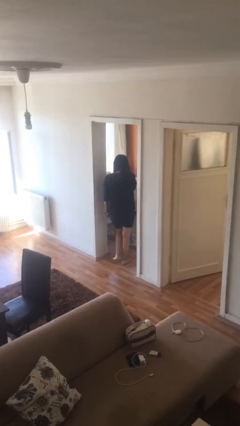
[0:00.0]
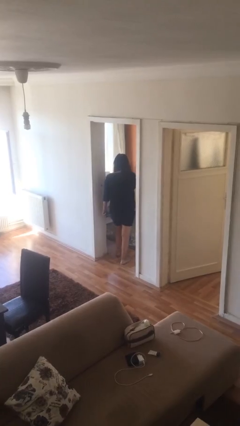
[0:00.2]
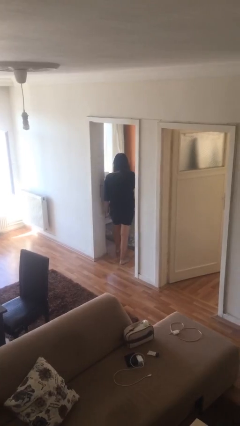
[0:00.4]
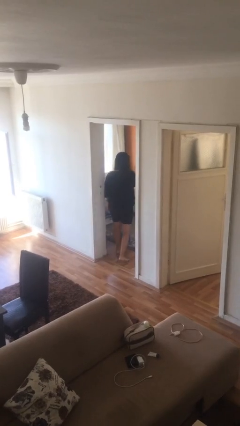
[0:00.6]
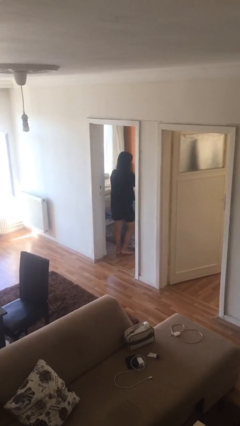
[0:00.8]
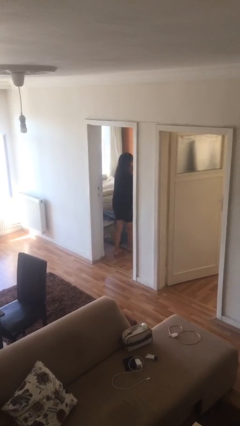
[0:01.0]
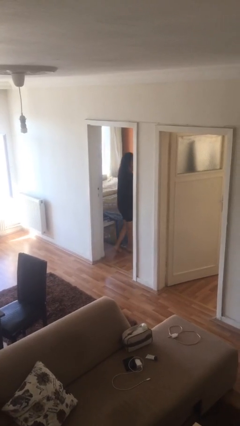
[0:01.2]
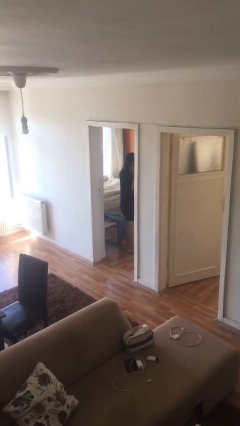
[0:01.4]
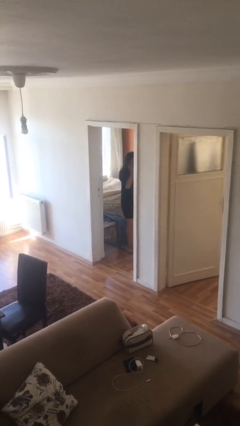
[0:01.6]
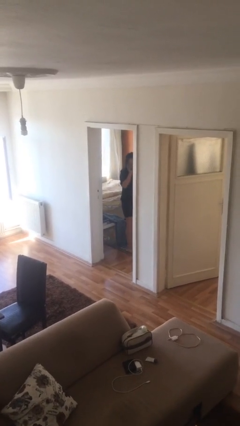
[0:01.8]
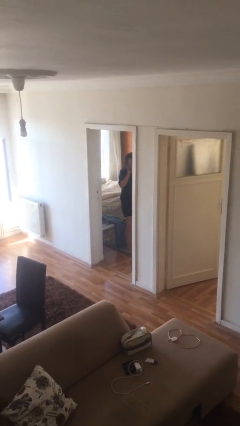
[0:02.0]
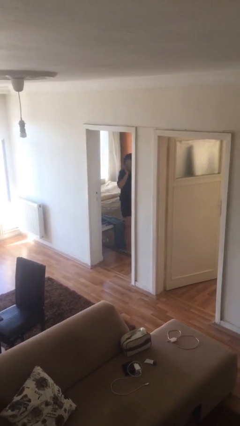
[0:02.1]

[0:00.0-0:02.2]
person exits scene through structure

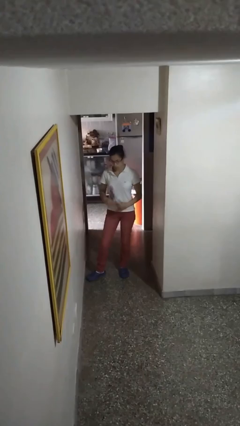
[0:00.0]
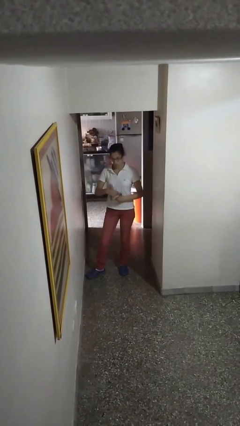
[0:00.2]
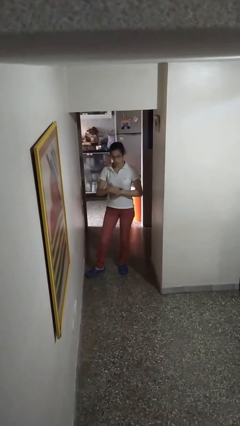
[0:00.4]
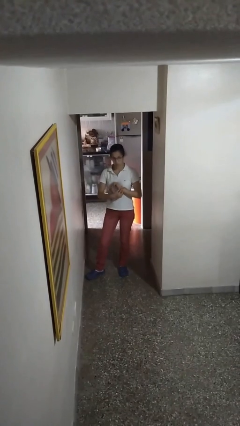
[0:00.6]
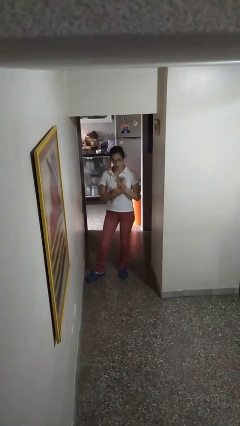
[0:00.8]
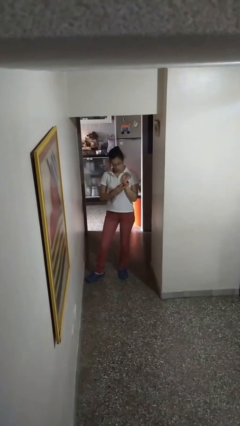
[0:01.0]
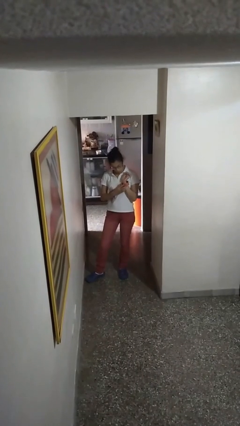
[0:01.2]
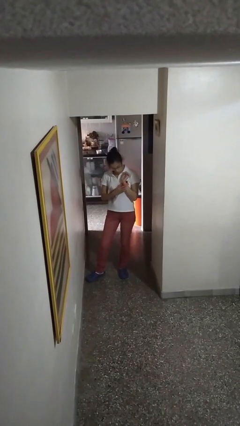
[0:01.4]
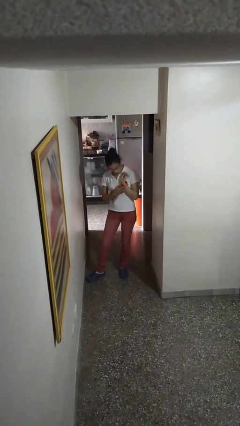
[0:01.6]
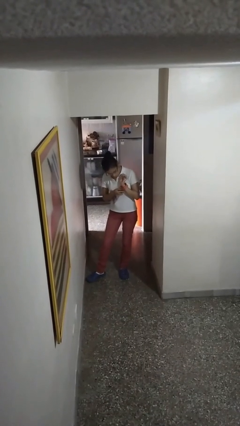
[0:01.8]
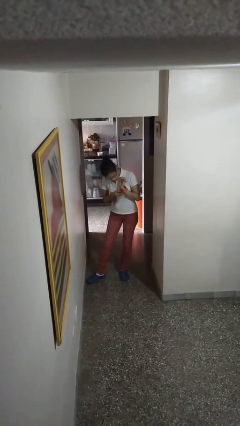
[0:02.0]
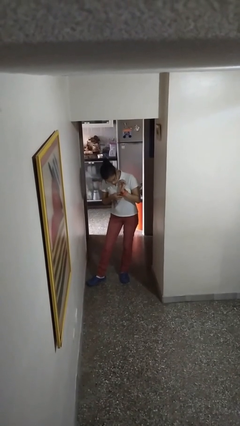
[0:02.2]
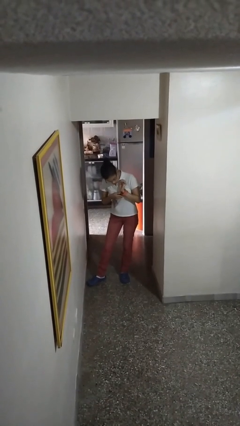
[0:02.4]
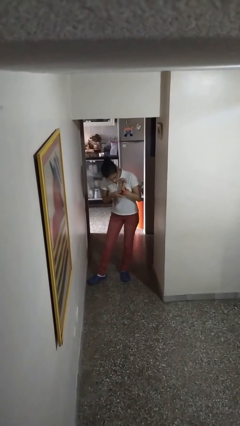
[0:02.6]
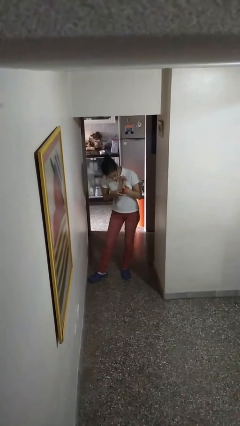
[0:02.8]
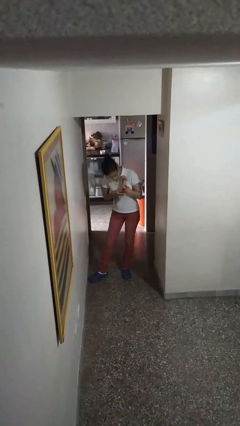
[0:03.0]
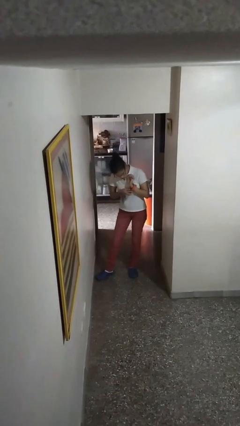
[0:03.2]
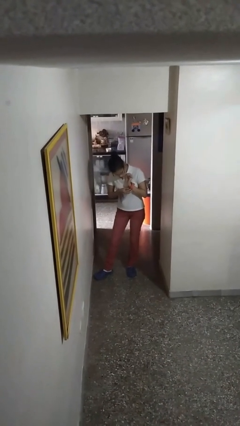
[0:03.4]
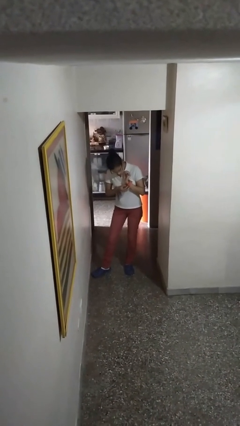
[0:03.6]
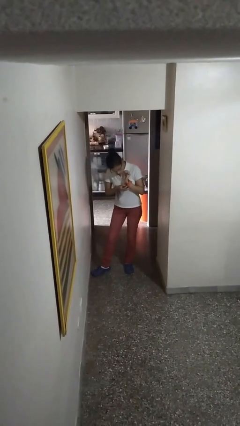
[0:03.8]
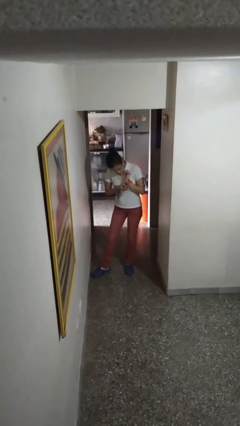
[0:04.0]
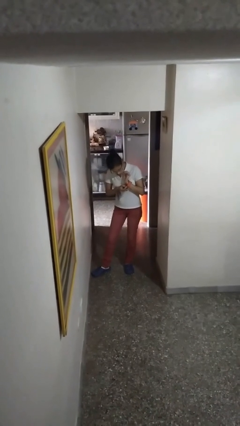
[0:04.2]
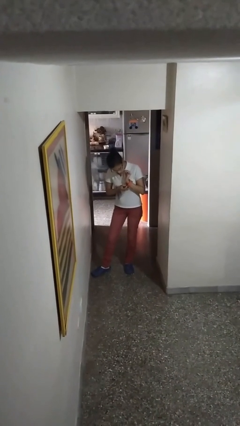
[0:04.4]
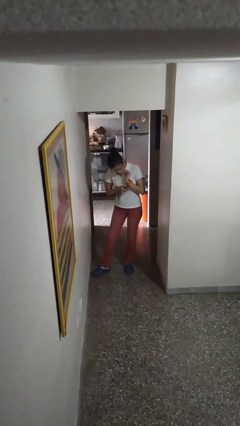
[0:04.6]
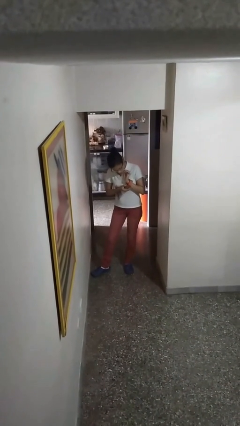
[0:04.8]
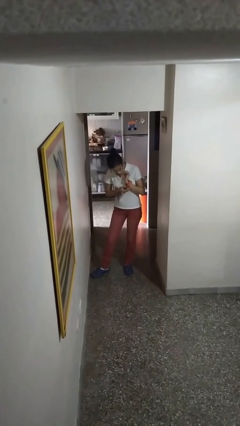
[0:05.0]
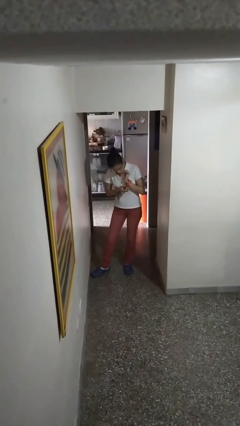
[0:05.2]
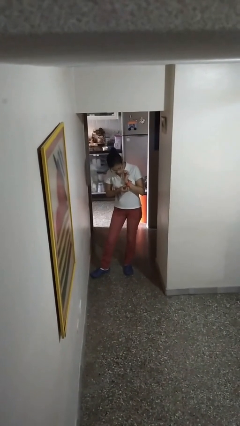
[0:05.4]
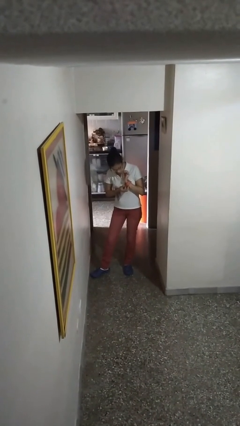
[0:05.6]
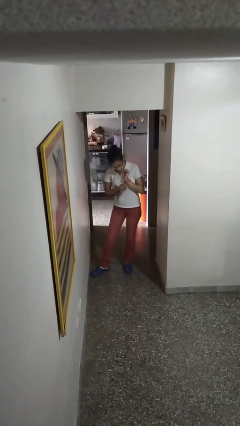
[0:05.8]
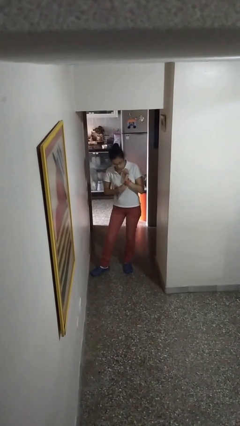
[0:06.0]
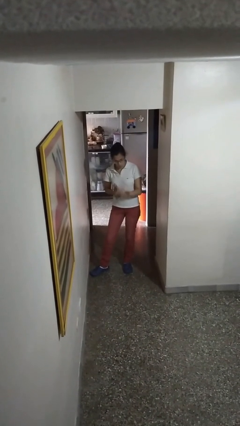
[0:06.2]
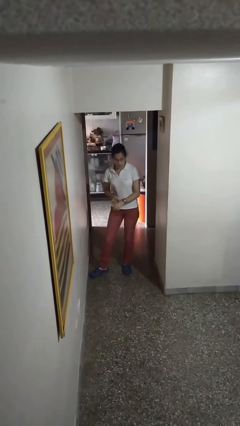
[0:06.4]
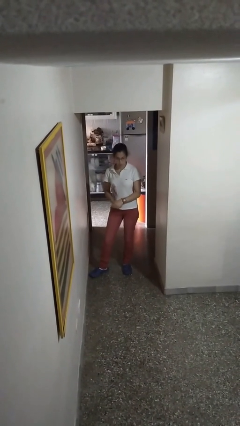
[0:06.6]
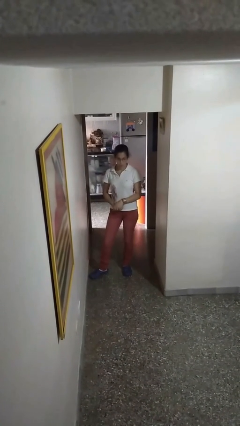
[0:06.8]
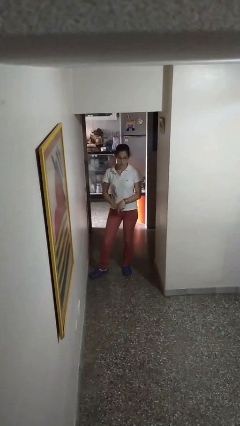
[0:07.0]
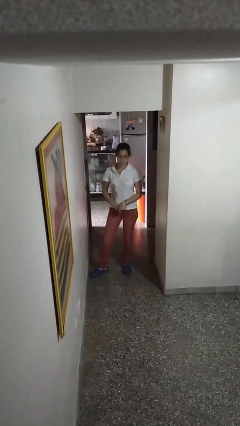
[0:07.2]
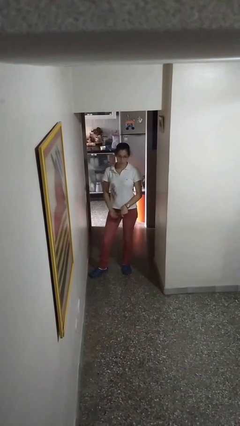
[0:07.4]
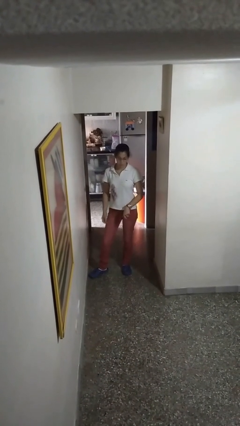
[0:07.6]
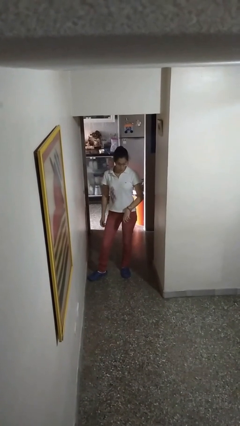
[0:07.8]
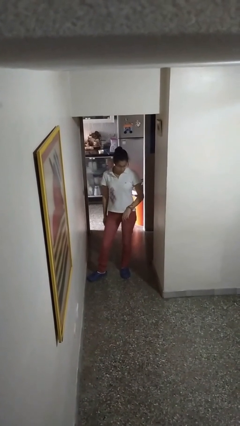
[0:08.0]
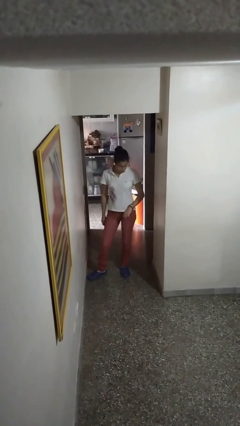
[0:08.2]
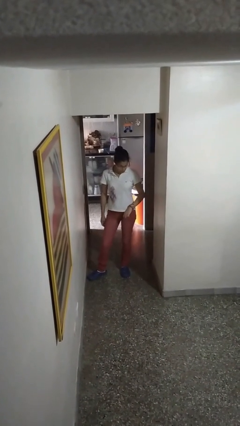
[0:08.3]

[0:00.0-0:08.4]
person puts on wristwatch

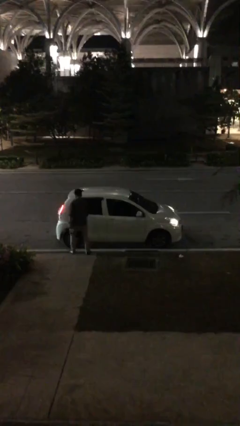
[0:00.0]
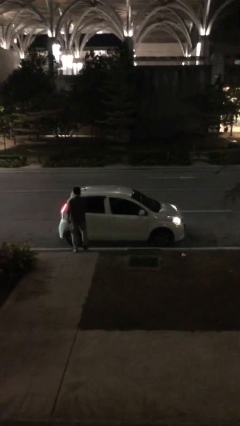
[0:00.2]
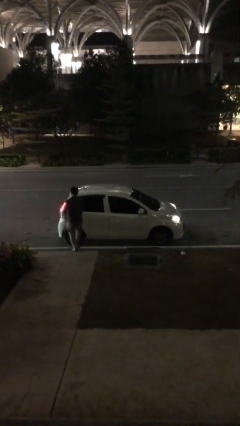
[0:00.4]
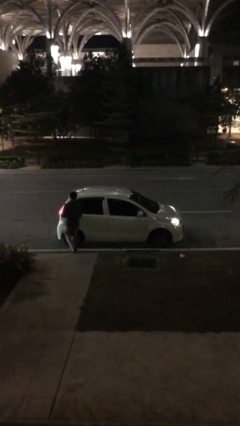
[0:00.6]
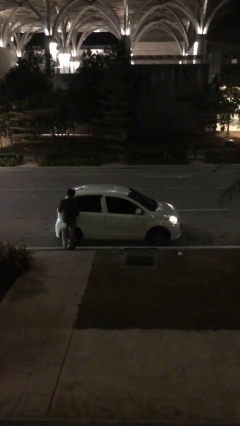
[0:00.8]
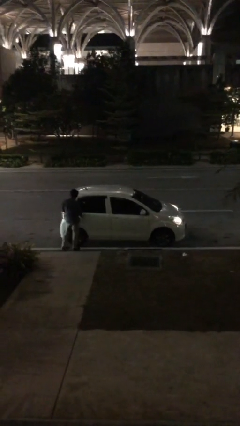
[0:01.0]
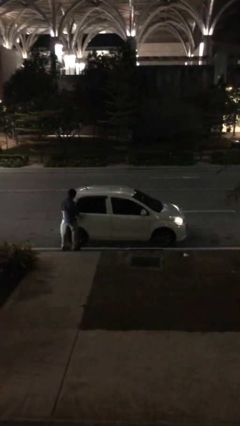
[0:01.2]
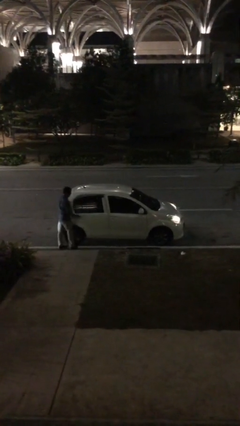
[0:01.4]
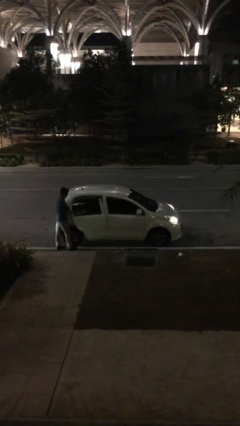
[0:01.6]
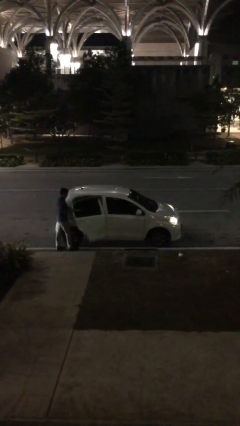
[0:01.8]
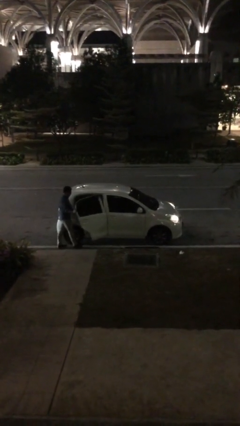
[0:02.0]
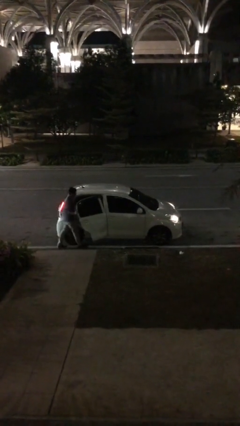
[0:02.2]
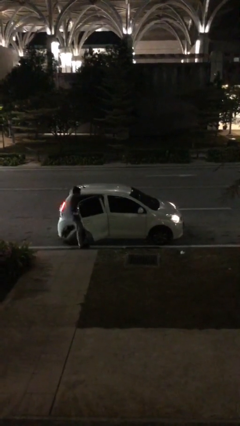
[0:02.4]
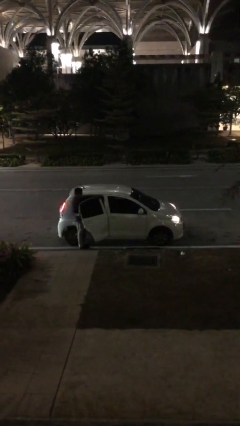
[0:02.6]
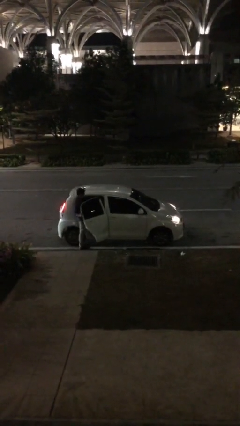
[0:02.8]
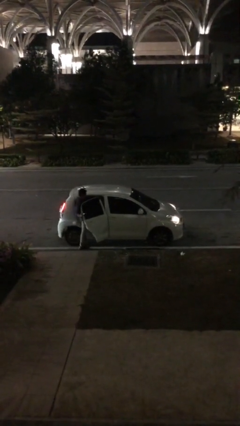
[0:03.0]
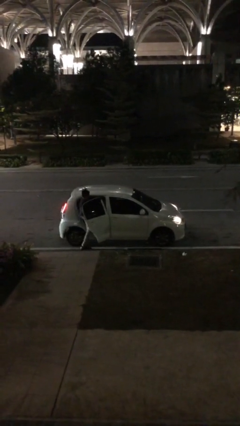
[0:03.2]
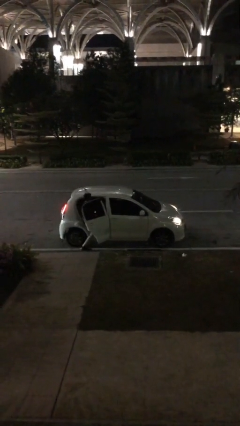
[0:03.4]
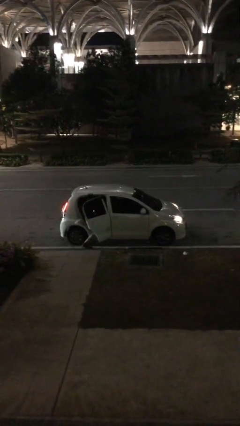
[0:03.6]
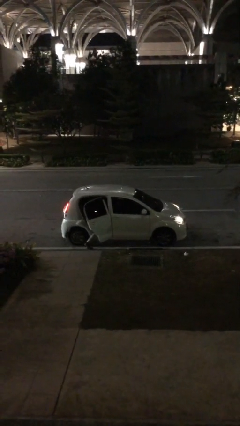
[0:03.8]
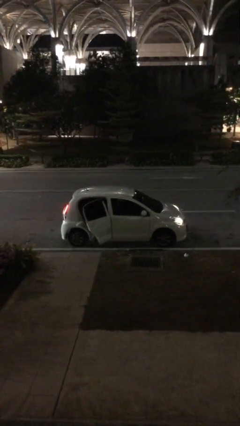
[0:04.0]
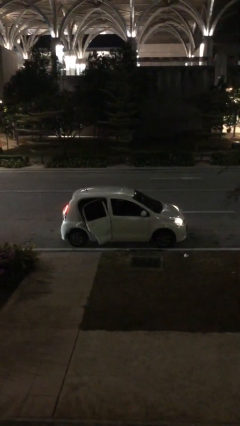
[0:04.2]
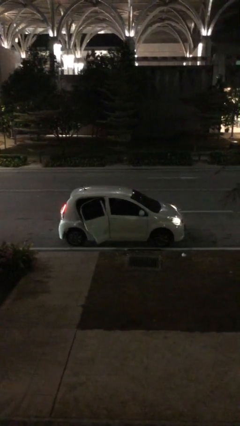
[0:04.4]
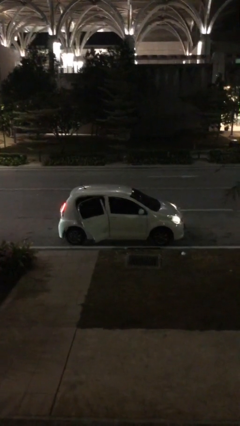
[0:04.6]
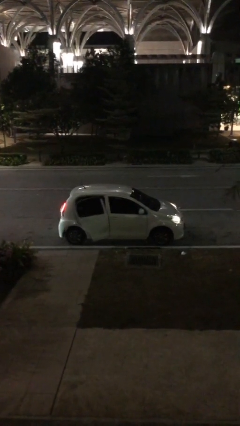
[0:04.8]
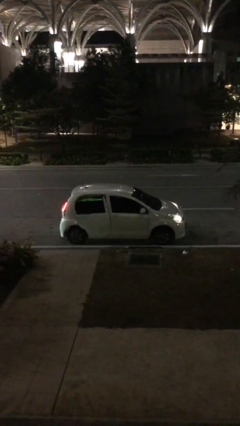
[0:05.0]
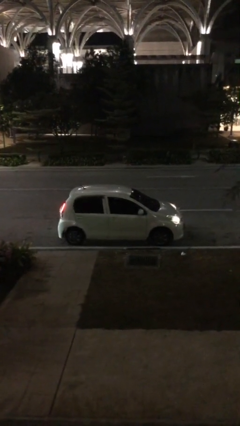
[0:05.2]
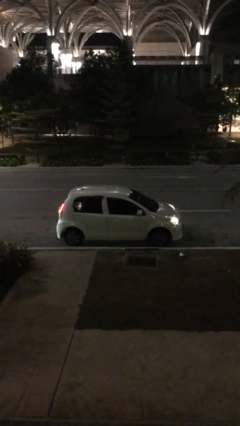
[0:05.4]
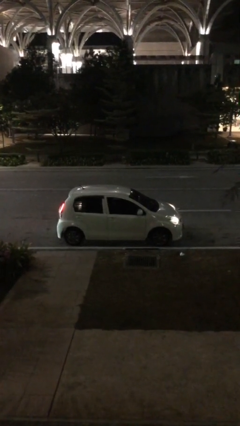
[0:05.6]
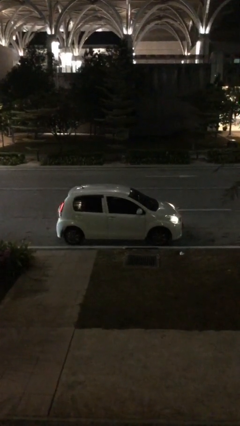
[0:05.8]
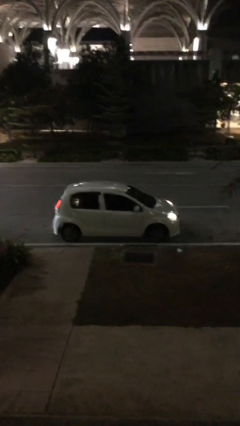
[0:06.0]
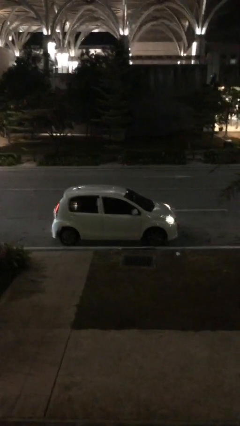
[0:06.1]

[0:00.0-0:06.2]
car picks up person

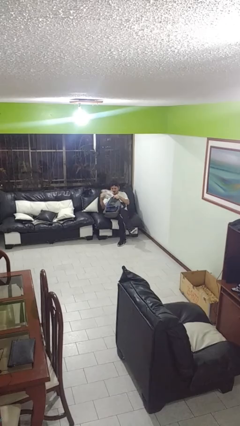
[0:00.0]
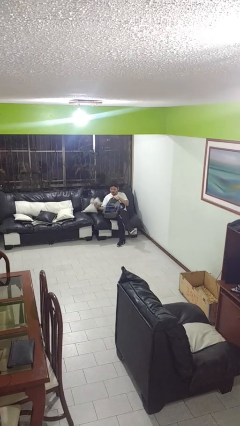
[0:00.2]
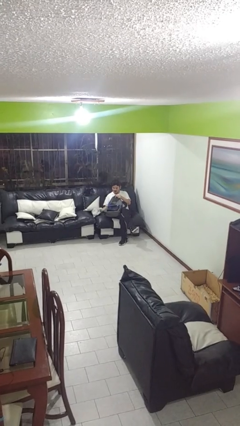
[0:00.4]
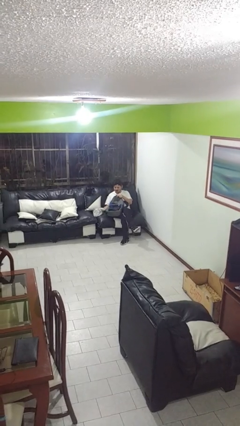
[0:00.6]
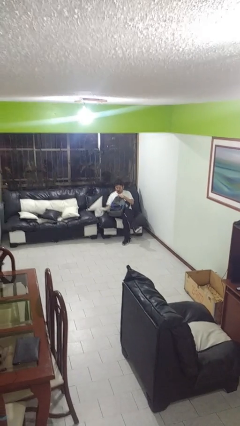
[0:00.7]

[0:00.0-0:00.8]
person takes object from backpack
